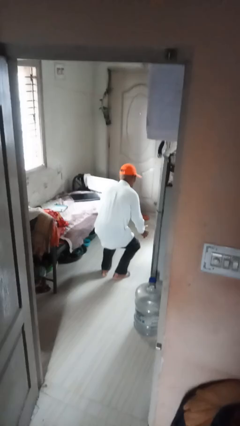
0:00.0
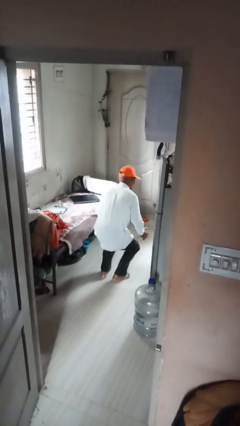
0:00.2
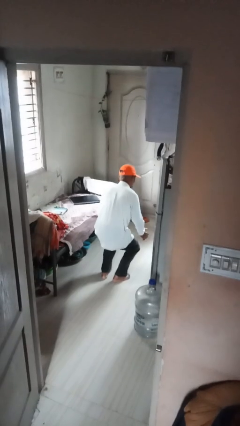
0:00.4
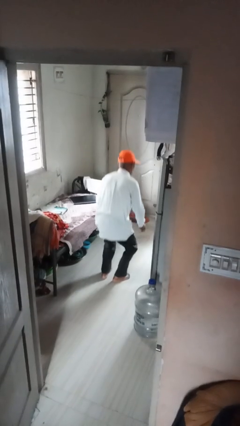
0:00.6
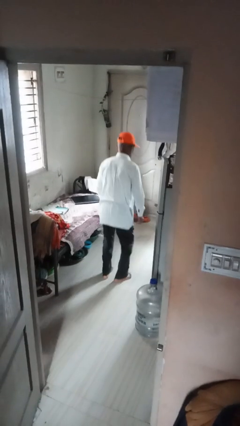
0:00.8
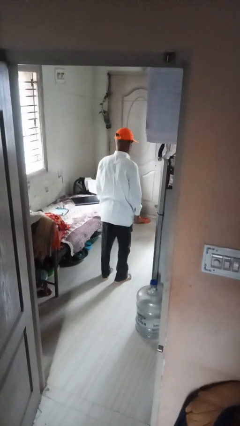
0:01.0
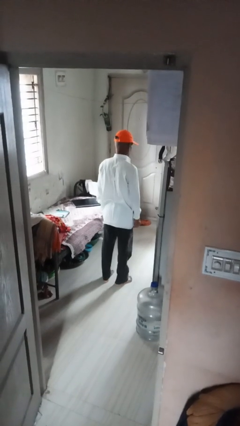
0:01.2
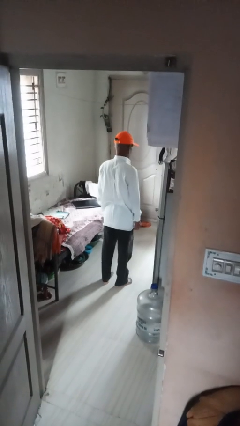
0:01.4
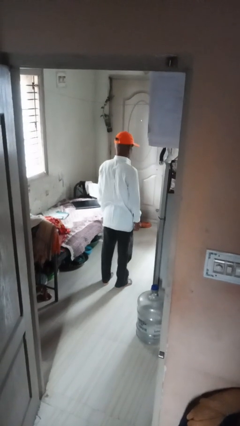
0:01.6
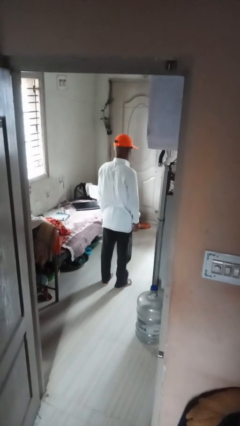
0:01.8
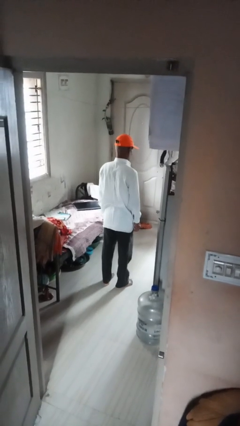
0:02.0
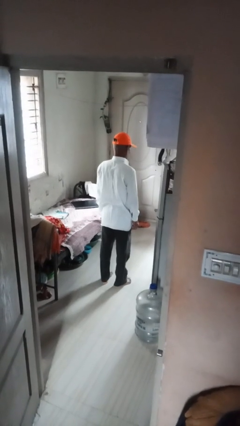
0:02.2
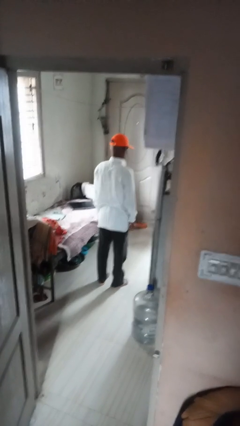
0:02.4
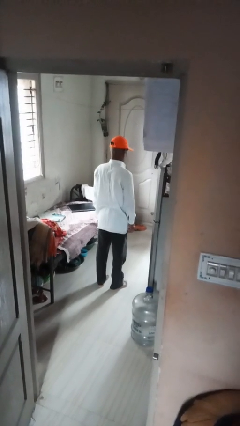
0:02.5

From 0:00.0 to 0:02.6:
person stands up

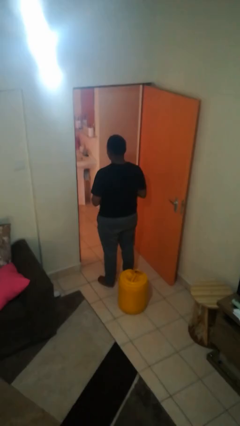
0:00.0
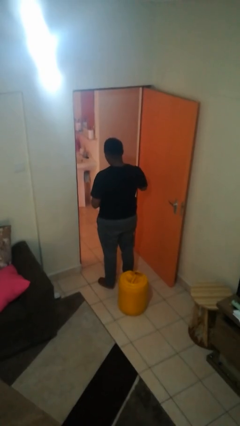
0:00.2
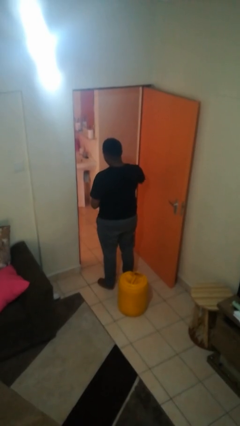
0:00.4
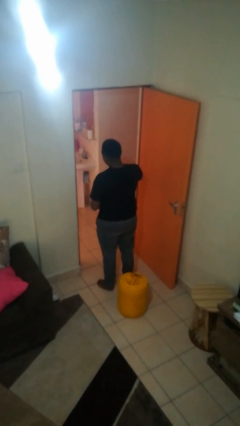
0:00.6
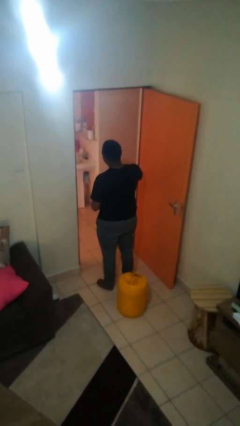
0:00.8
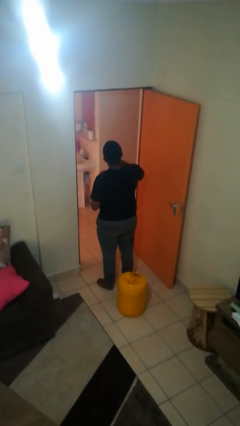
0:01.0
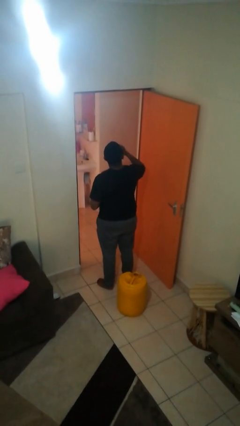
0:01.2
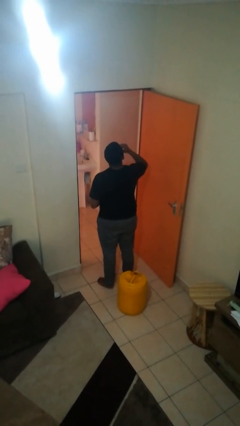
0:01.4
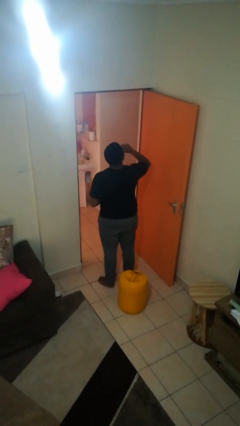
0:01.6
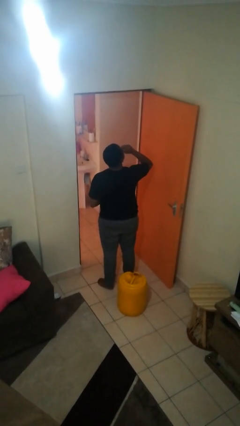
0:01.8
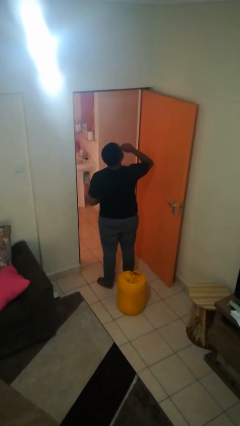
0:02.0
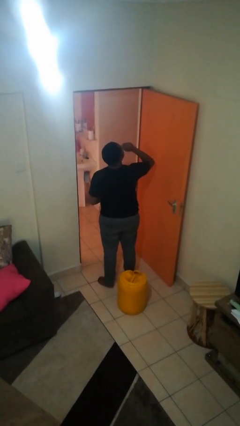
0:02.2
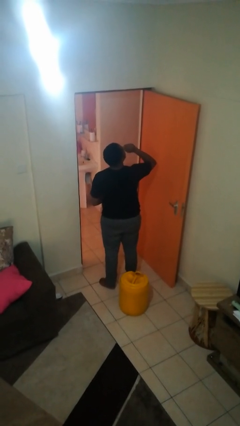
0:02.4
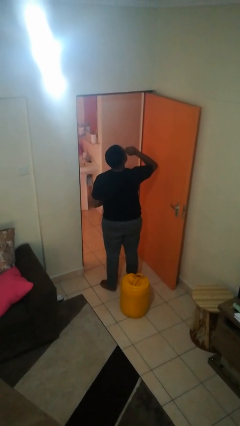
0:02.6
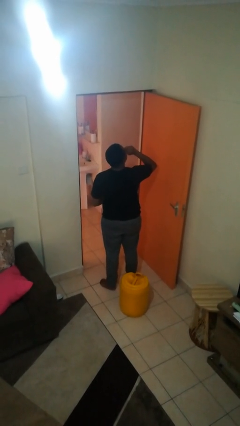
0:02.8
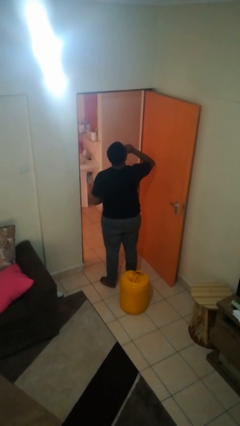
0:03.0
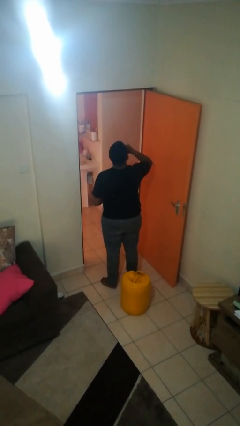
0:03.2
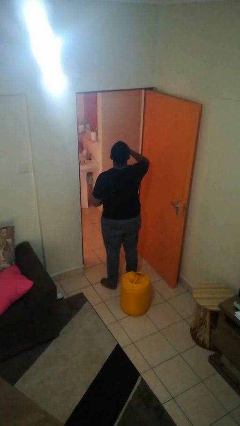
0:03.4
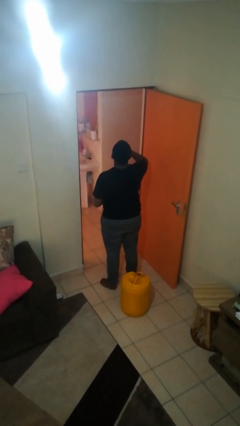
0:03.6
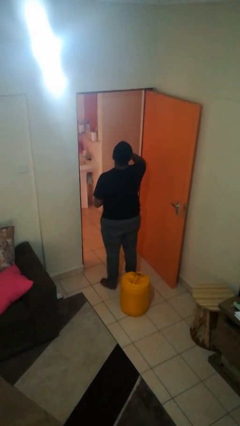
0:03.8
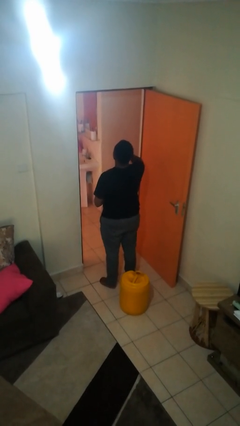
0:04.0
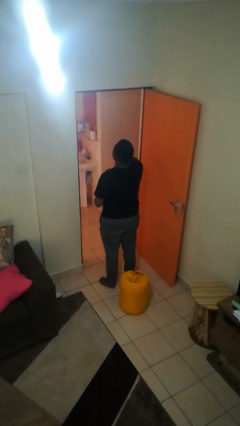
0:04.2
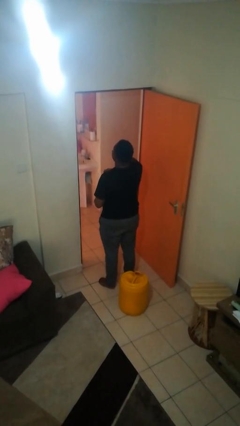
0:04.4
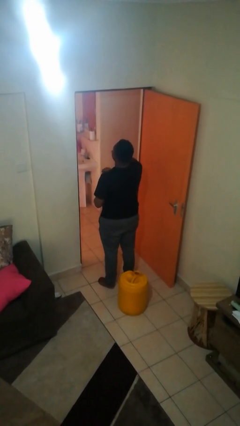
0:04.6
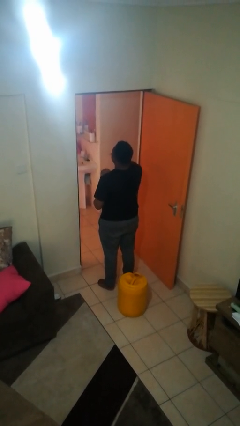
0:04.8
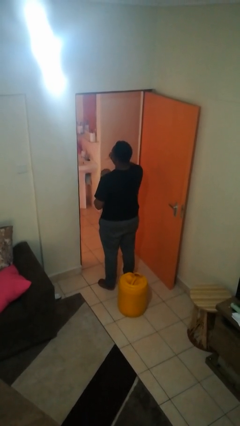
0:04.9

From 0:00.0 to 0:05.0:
person eats snack from bag

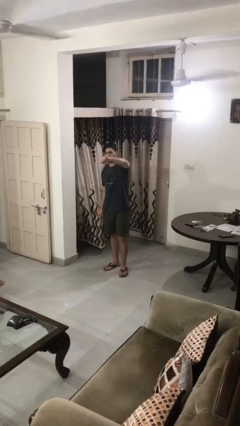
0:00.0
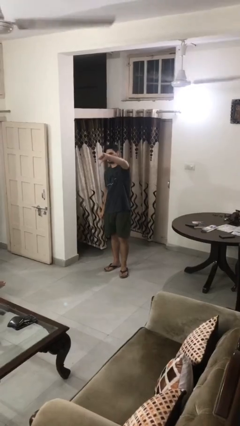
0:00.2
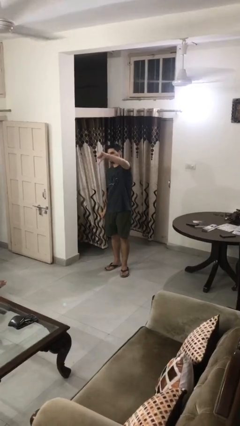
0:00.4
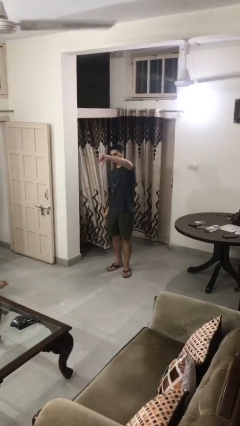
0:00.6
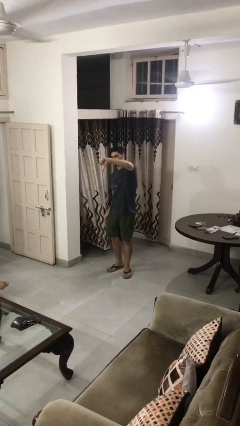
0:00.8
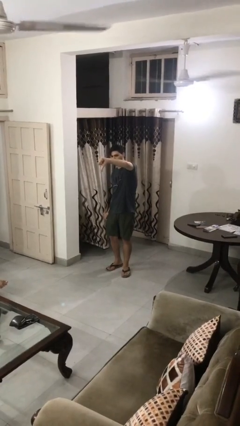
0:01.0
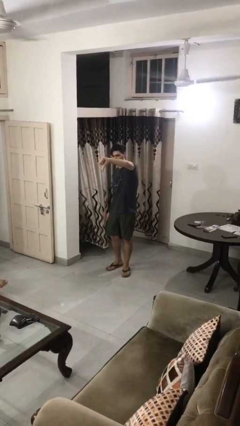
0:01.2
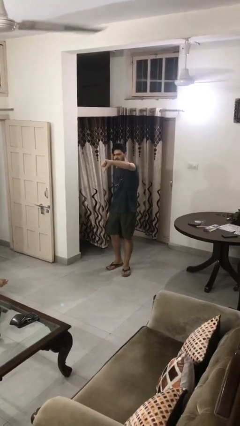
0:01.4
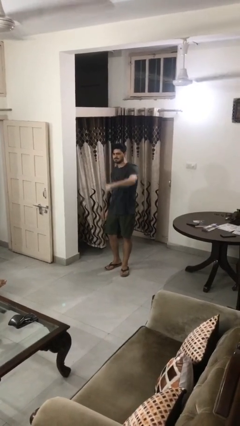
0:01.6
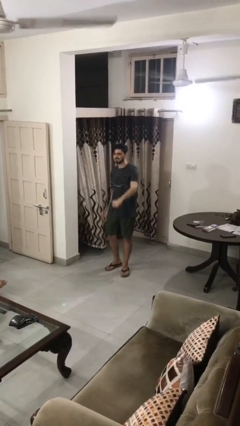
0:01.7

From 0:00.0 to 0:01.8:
person gestures thumbs down

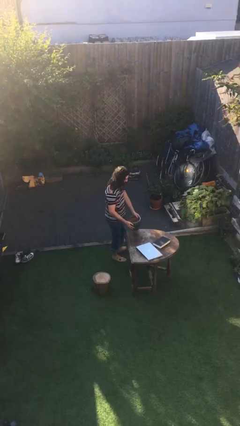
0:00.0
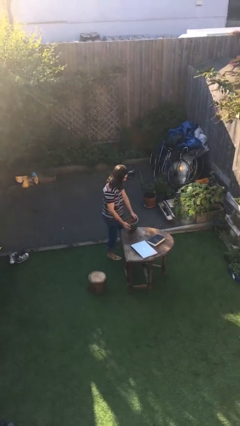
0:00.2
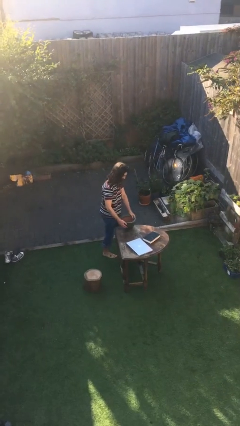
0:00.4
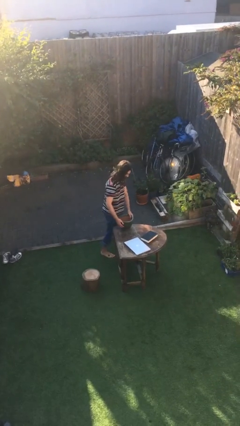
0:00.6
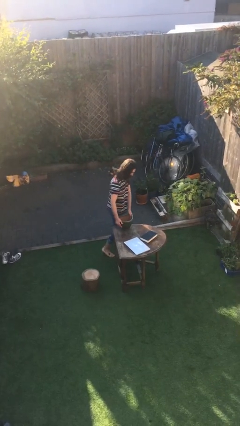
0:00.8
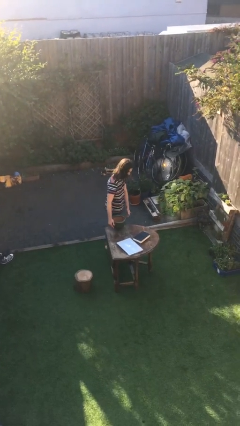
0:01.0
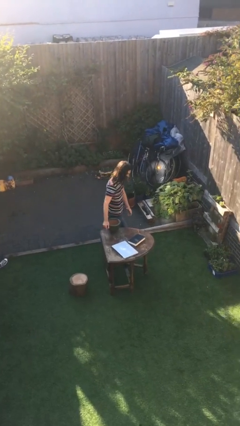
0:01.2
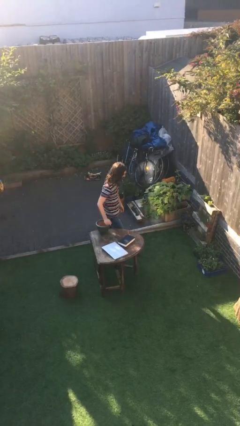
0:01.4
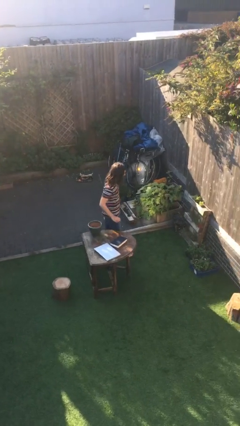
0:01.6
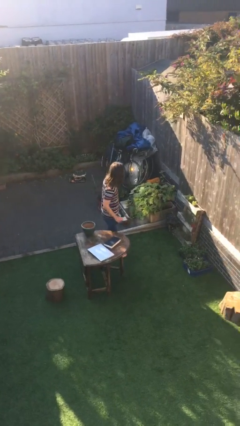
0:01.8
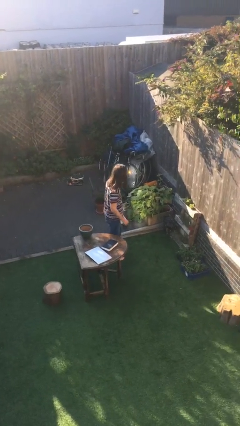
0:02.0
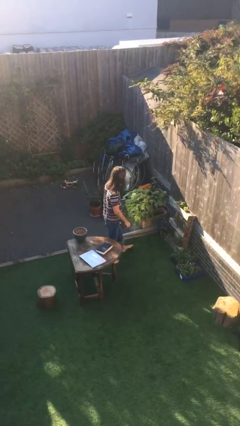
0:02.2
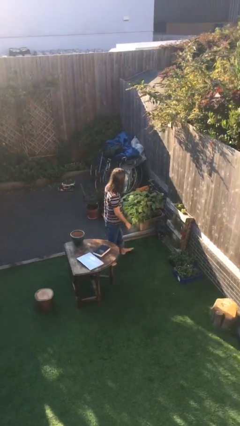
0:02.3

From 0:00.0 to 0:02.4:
person puts down object on table

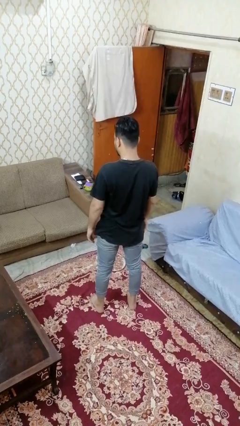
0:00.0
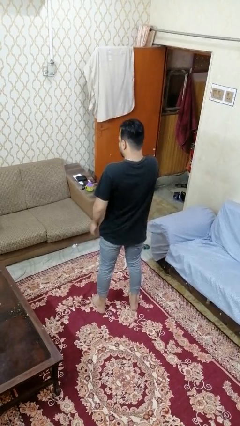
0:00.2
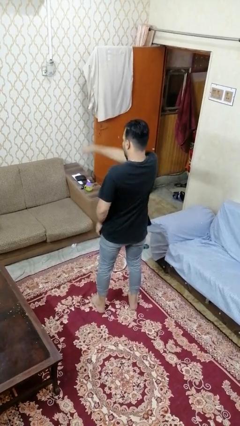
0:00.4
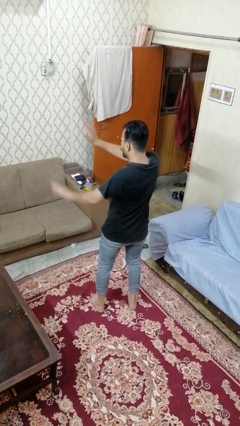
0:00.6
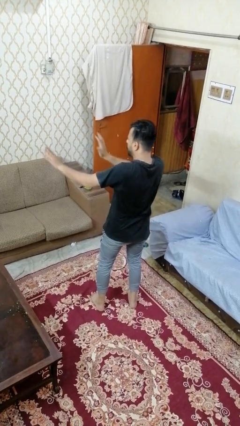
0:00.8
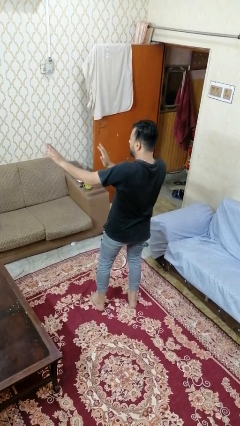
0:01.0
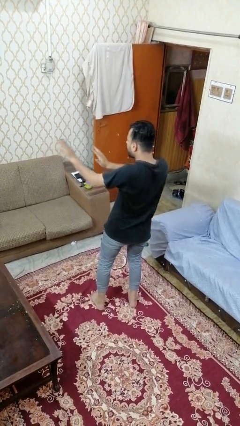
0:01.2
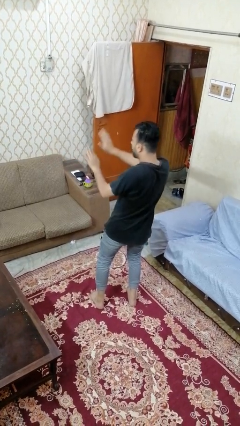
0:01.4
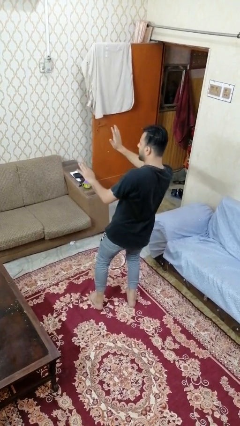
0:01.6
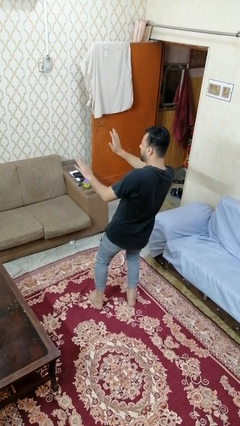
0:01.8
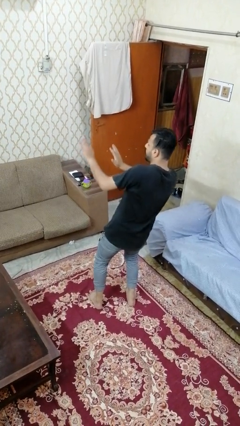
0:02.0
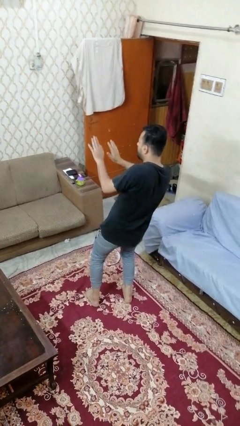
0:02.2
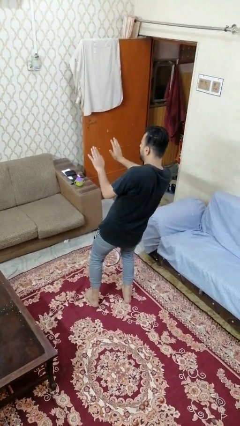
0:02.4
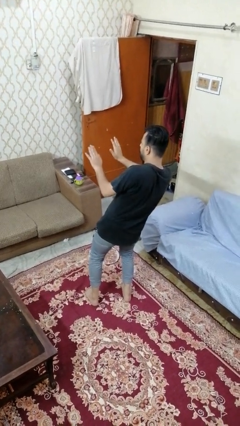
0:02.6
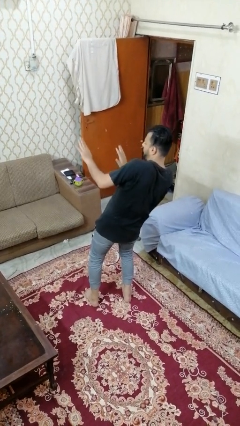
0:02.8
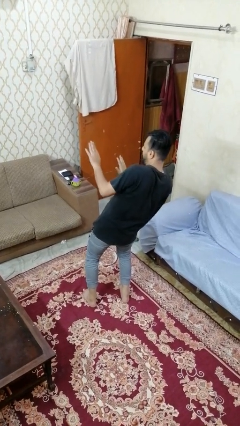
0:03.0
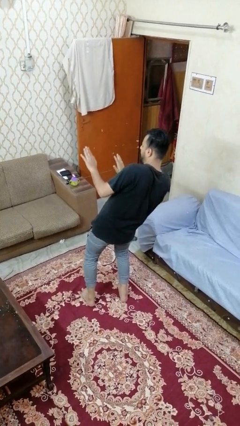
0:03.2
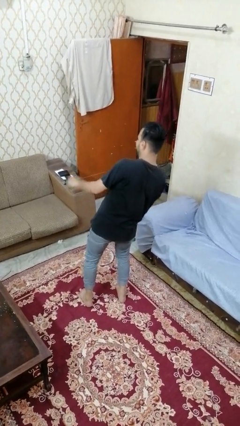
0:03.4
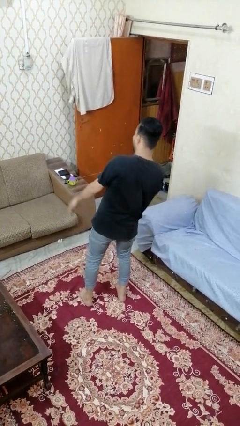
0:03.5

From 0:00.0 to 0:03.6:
person dances in place

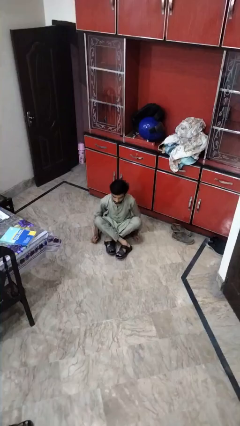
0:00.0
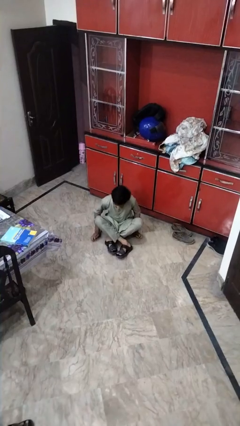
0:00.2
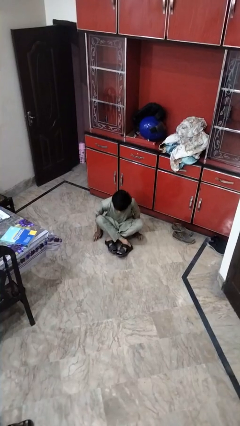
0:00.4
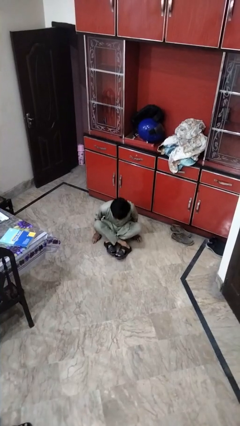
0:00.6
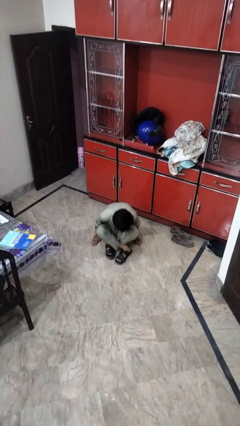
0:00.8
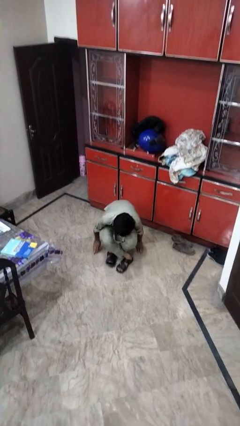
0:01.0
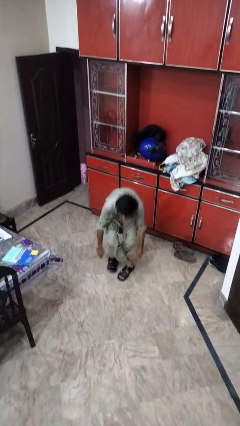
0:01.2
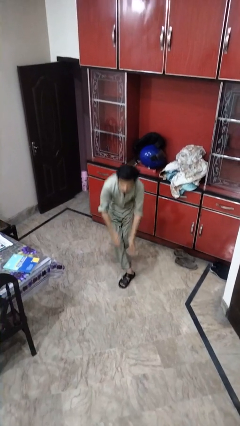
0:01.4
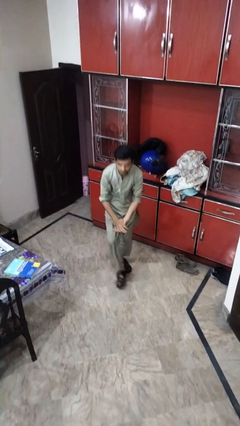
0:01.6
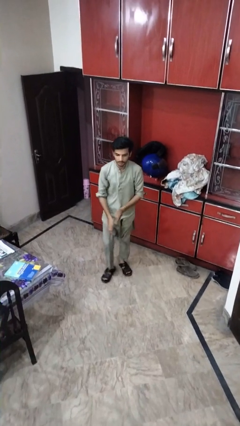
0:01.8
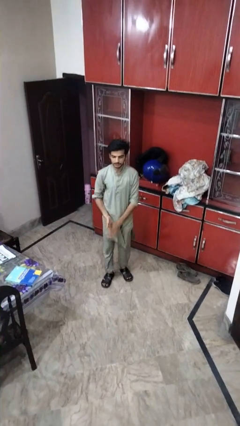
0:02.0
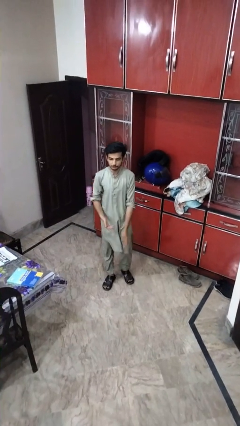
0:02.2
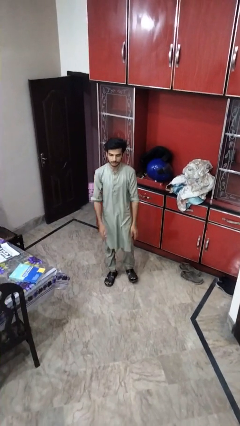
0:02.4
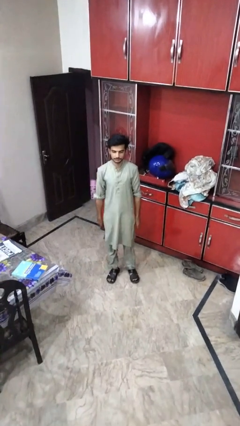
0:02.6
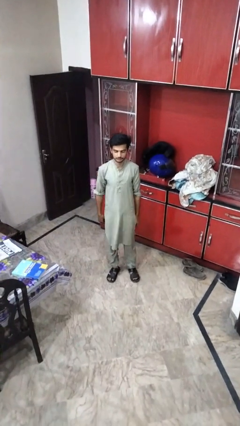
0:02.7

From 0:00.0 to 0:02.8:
person stands up from floor
